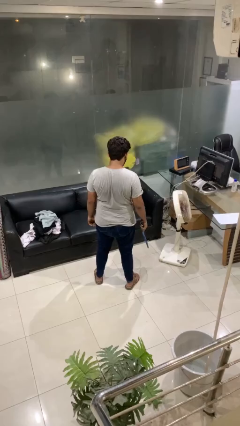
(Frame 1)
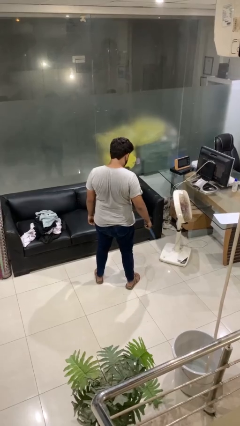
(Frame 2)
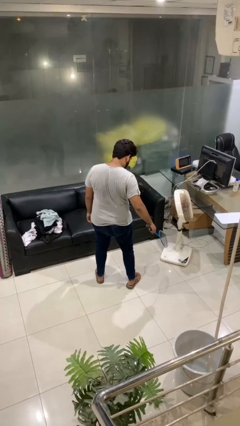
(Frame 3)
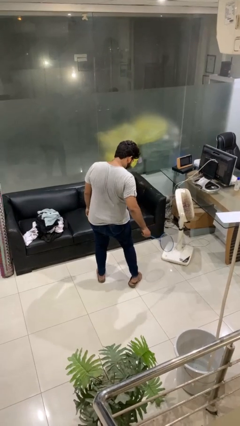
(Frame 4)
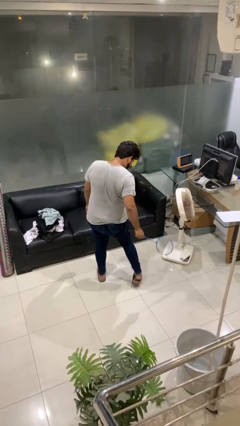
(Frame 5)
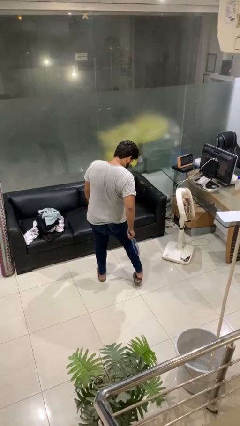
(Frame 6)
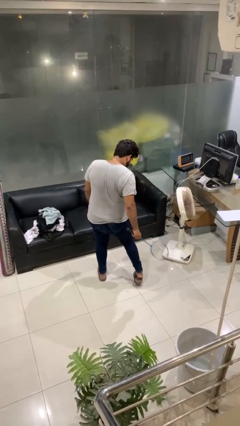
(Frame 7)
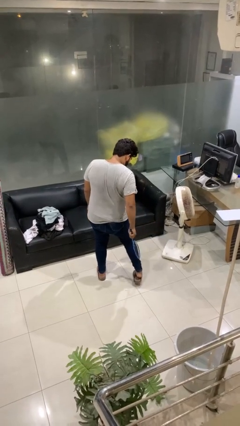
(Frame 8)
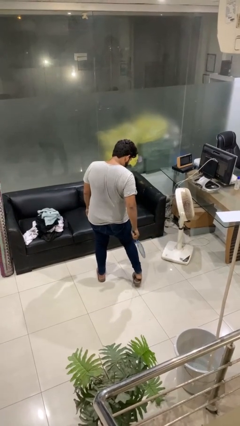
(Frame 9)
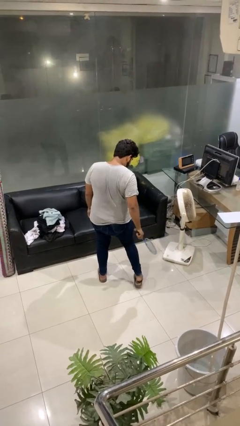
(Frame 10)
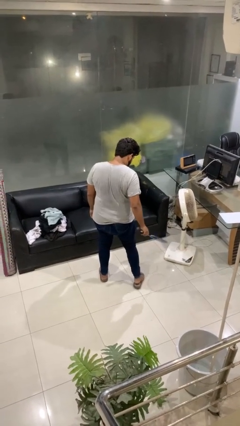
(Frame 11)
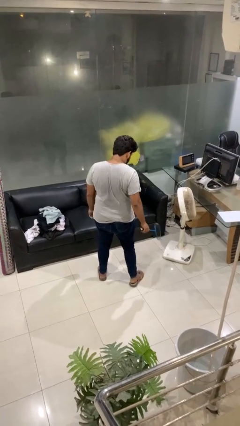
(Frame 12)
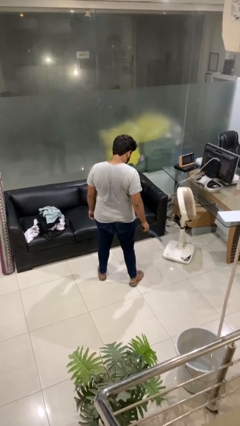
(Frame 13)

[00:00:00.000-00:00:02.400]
person swats bug

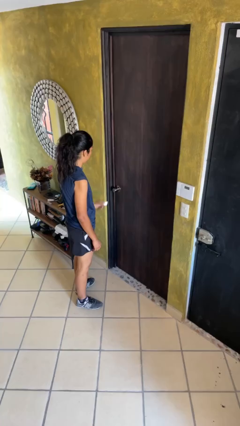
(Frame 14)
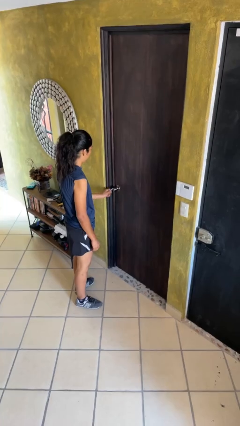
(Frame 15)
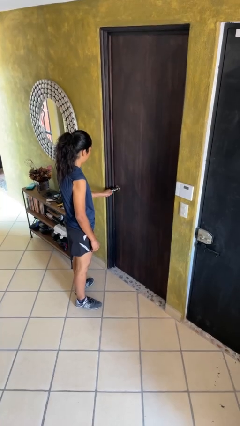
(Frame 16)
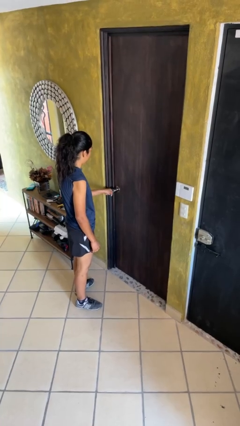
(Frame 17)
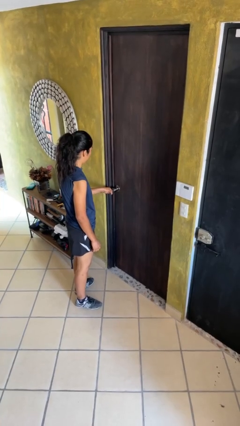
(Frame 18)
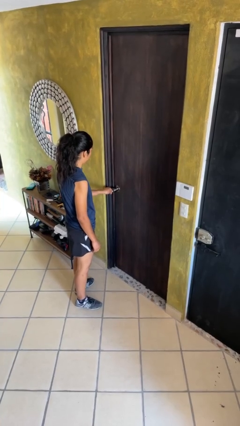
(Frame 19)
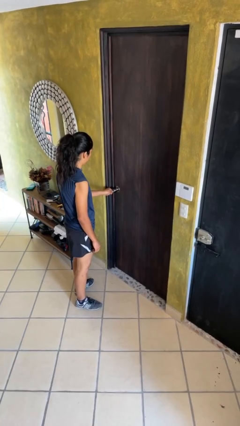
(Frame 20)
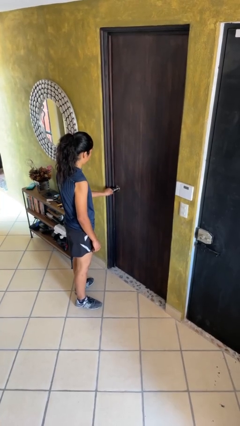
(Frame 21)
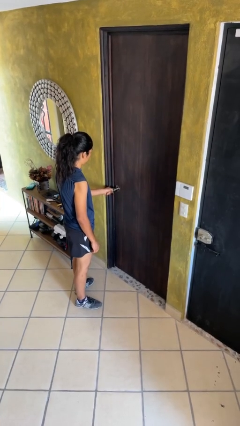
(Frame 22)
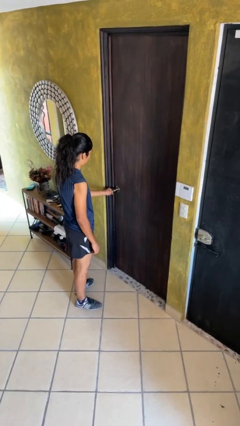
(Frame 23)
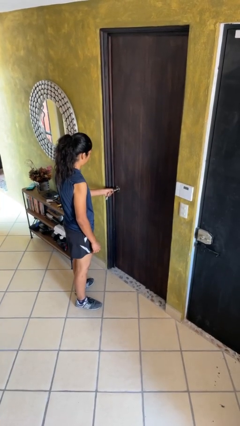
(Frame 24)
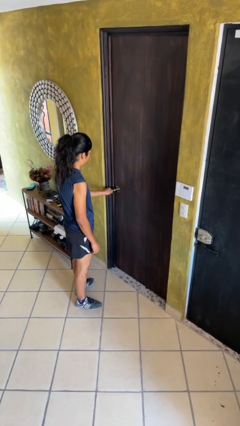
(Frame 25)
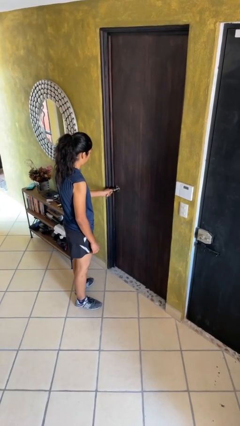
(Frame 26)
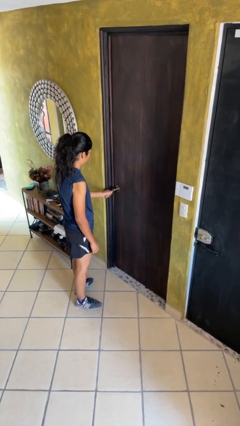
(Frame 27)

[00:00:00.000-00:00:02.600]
person locks door with keys

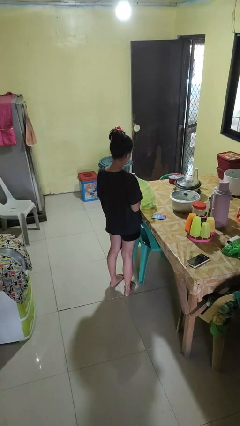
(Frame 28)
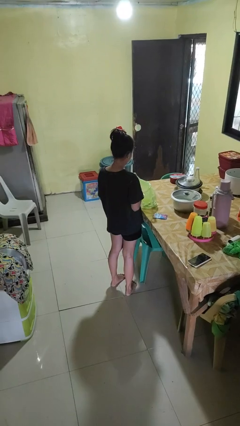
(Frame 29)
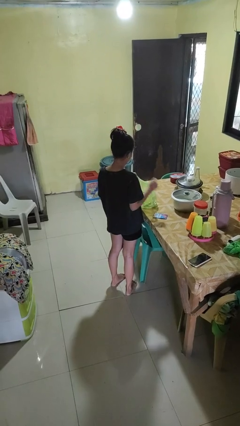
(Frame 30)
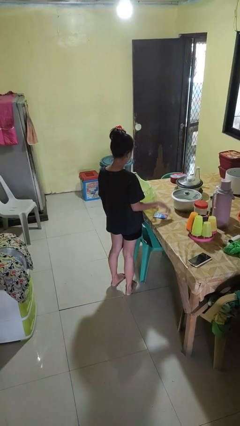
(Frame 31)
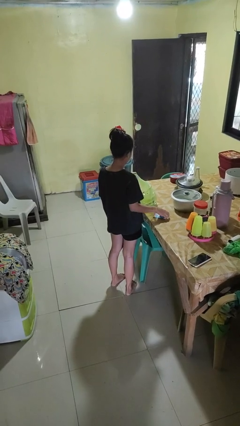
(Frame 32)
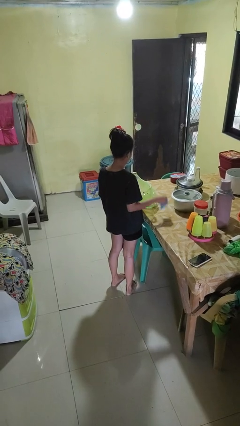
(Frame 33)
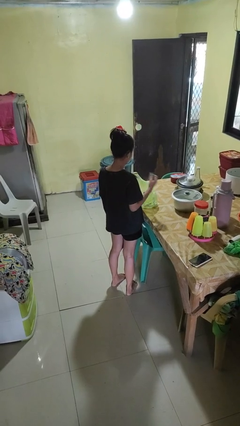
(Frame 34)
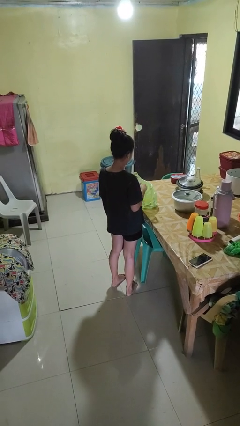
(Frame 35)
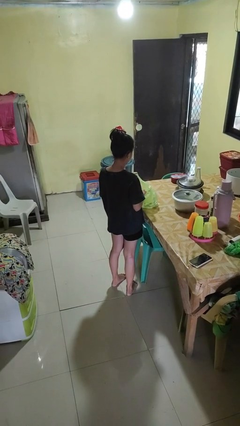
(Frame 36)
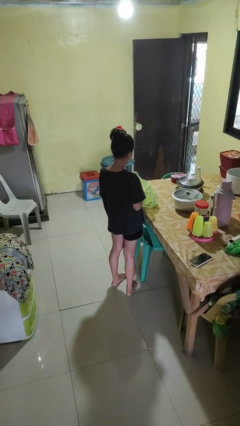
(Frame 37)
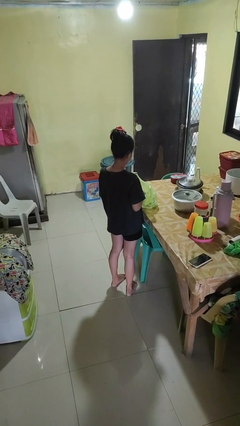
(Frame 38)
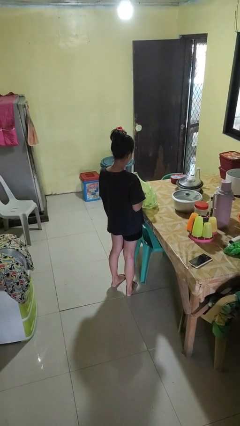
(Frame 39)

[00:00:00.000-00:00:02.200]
person puts object into bag

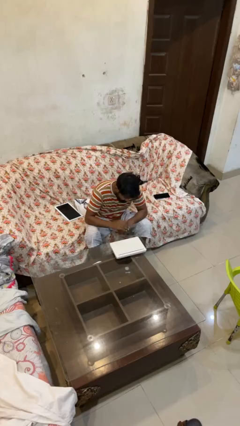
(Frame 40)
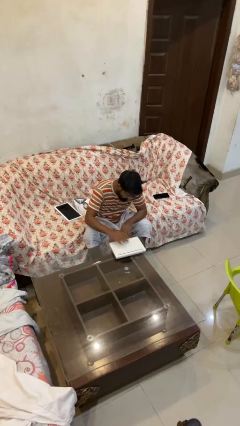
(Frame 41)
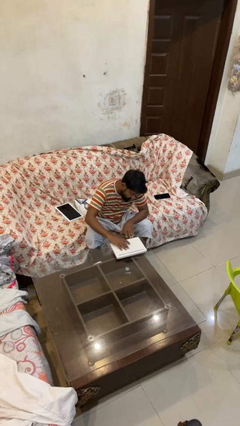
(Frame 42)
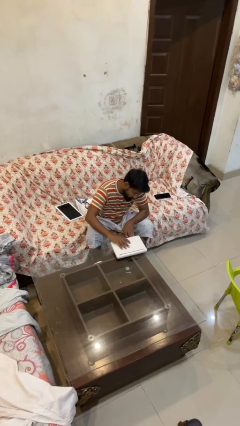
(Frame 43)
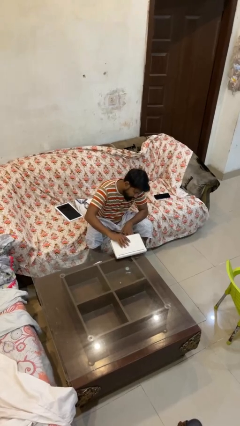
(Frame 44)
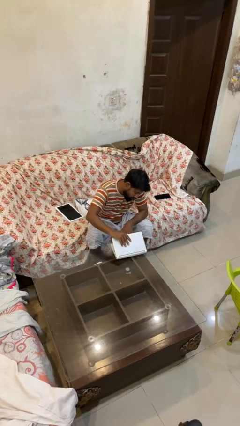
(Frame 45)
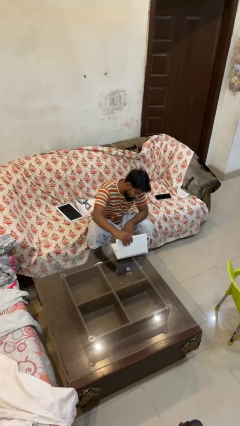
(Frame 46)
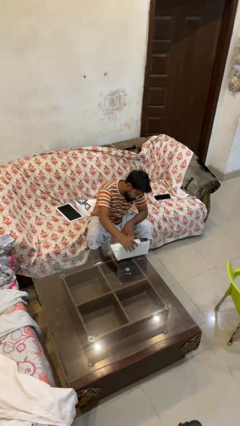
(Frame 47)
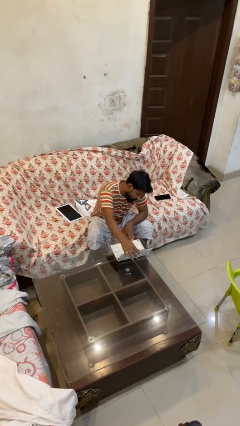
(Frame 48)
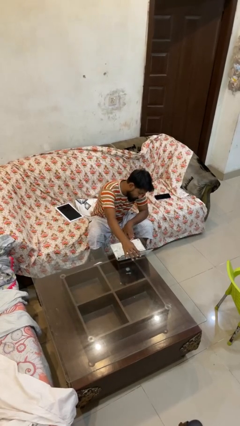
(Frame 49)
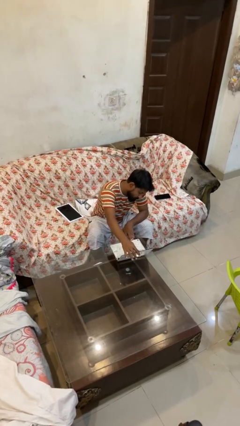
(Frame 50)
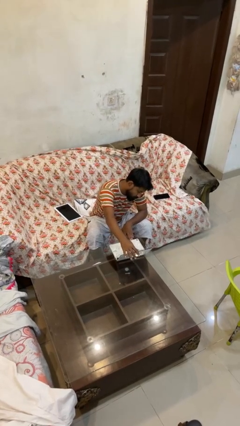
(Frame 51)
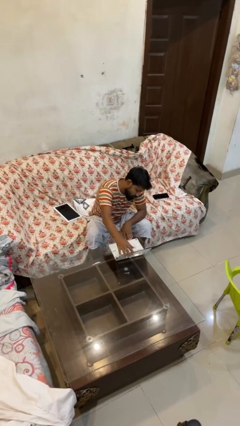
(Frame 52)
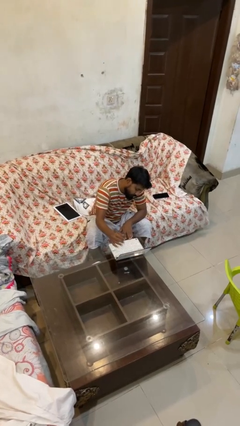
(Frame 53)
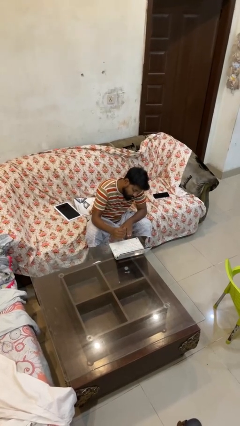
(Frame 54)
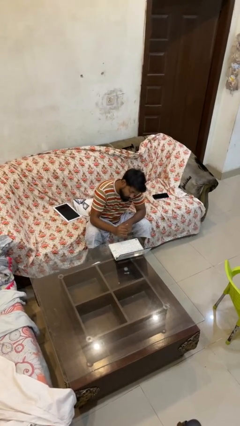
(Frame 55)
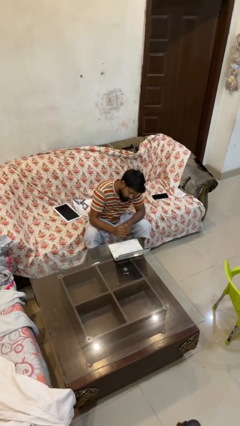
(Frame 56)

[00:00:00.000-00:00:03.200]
person opens laptop

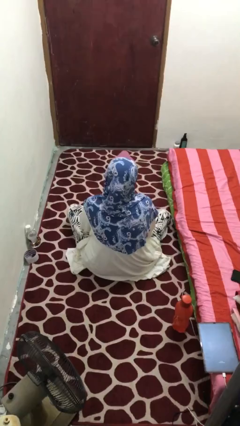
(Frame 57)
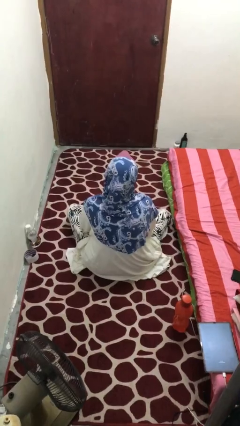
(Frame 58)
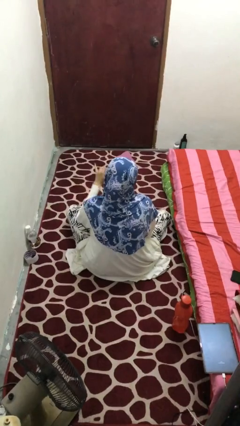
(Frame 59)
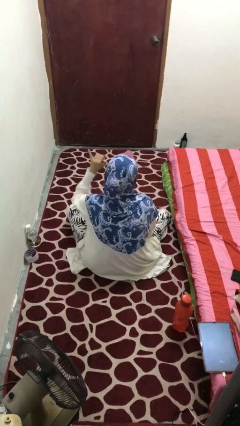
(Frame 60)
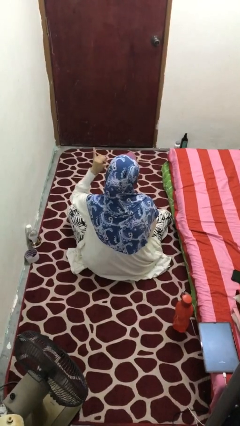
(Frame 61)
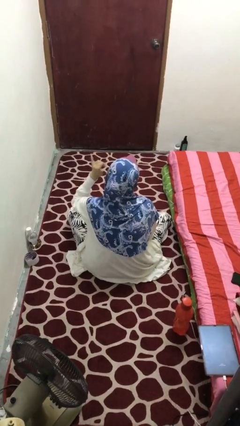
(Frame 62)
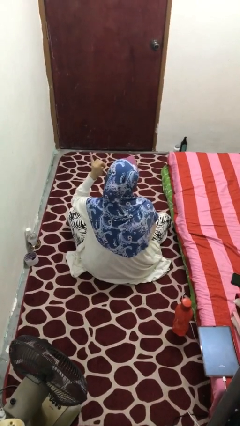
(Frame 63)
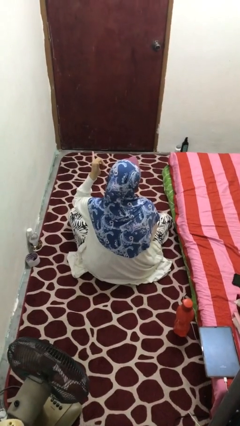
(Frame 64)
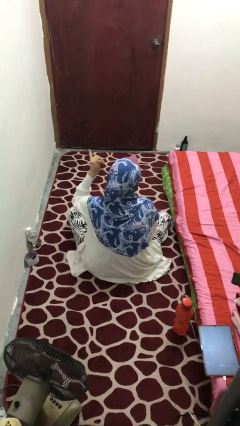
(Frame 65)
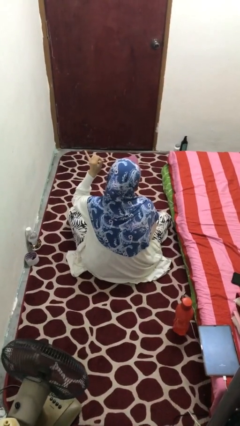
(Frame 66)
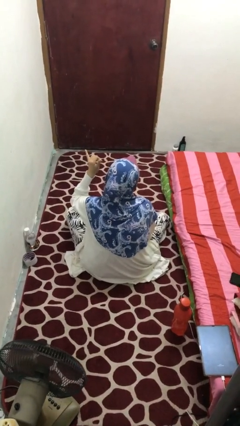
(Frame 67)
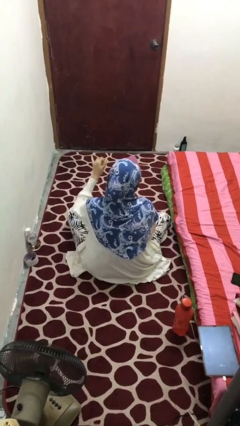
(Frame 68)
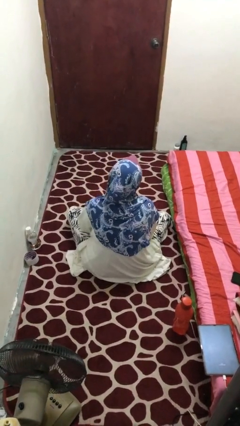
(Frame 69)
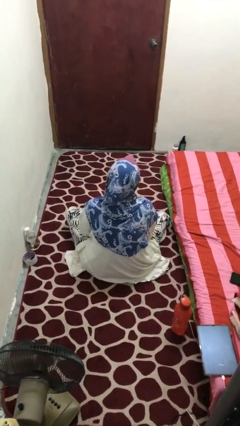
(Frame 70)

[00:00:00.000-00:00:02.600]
person gestures hang loose

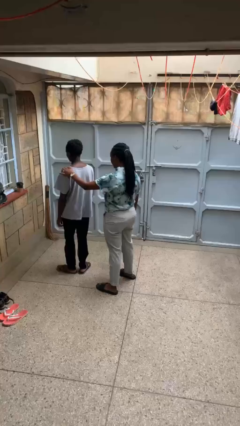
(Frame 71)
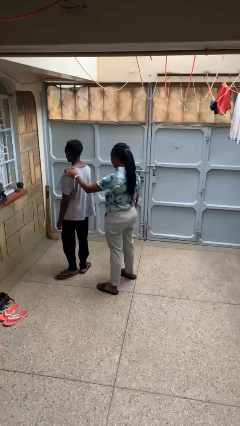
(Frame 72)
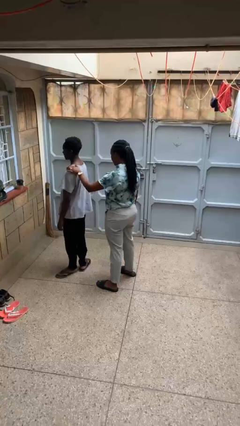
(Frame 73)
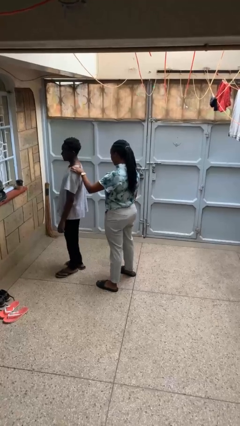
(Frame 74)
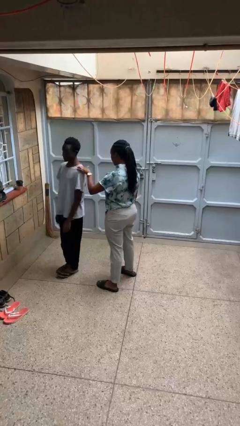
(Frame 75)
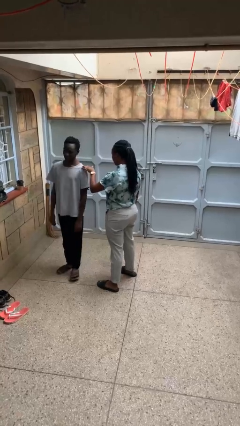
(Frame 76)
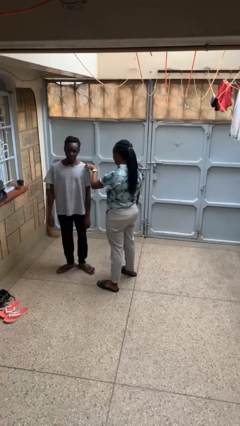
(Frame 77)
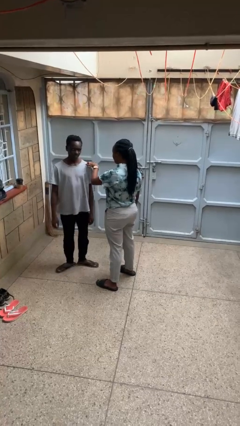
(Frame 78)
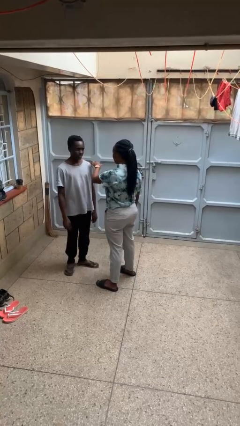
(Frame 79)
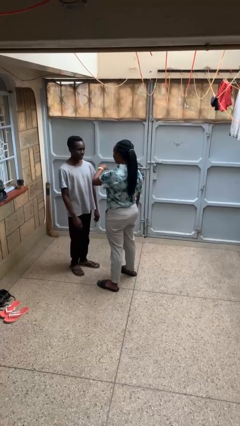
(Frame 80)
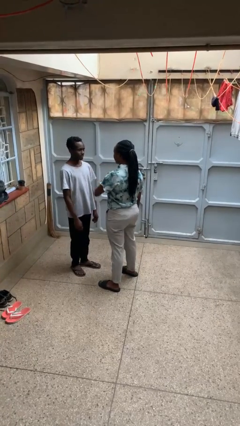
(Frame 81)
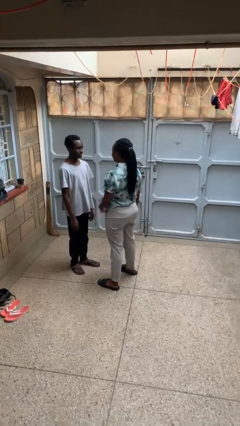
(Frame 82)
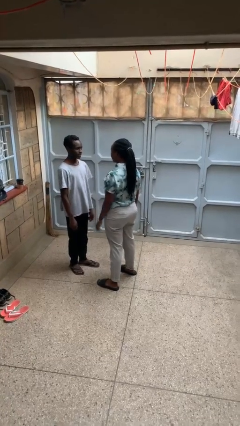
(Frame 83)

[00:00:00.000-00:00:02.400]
person spins person around

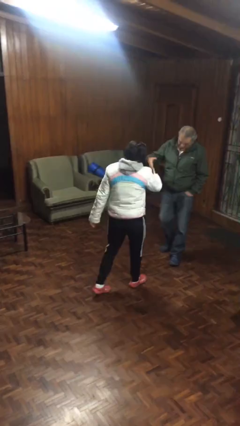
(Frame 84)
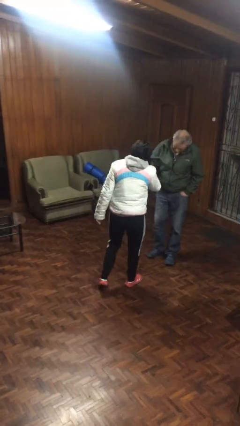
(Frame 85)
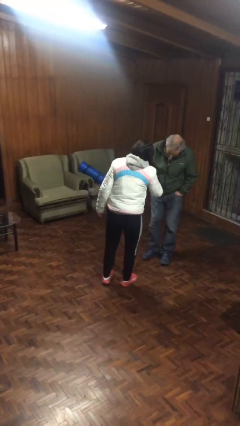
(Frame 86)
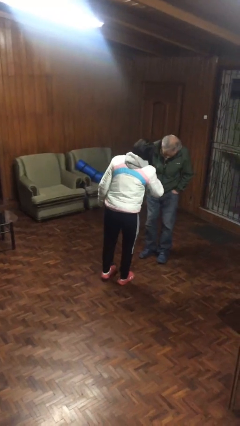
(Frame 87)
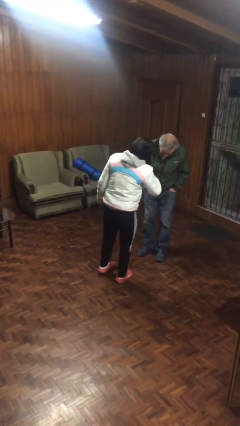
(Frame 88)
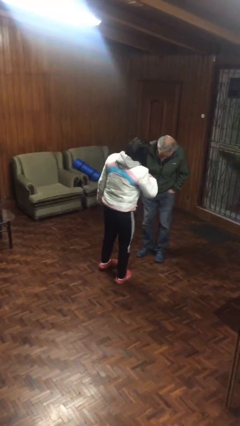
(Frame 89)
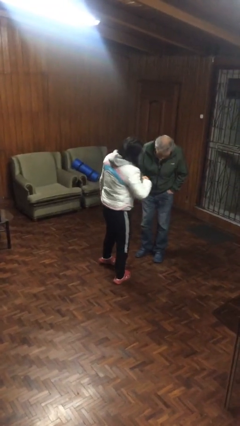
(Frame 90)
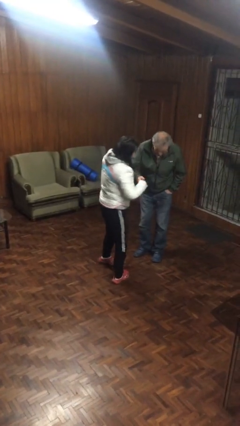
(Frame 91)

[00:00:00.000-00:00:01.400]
person shakes hand
